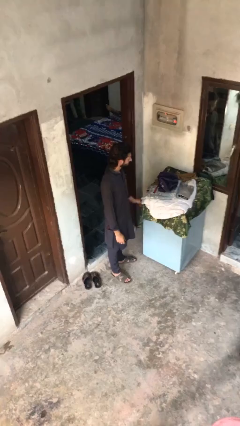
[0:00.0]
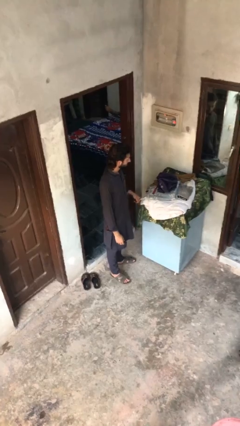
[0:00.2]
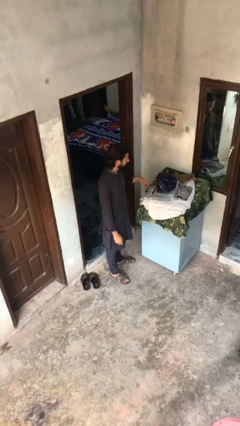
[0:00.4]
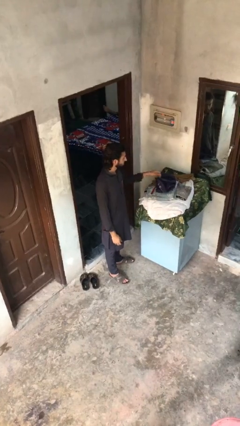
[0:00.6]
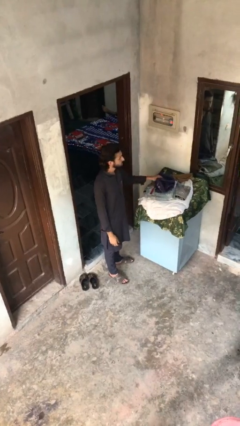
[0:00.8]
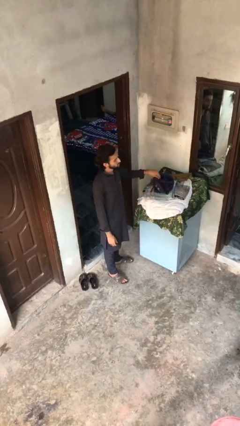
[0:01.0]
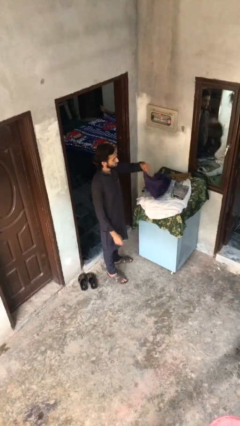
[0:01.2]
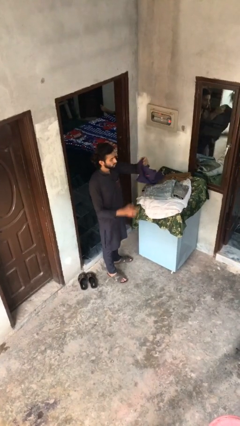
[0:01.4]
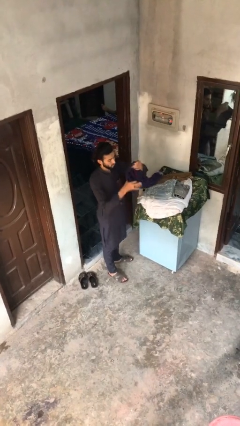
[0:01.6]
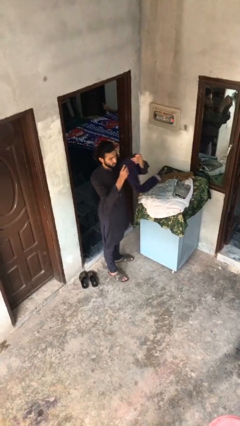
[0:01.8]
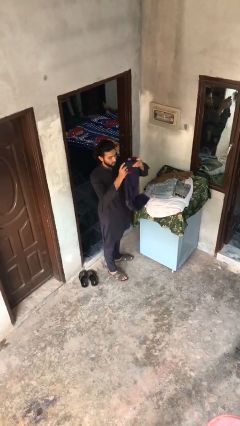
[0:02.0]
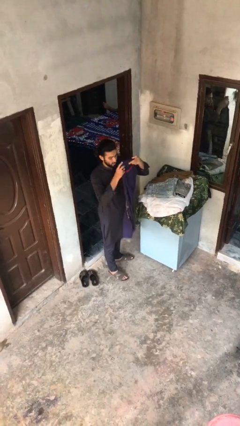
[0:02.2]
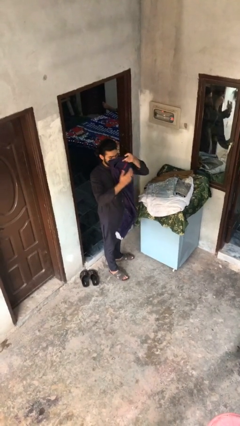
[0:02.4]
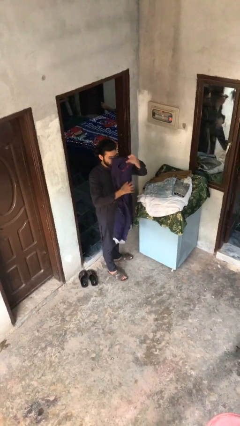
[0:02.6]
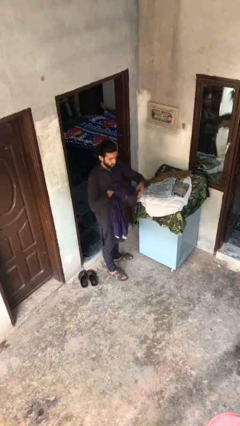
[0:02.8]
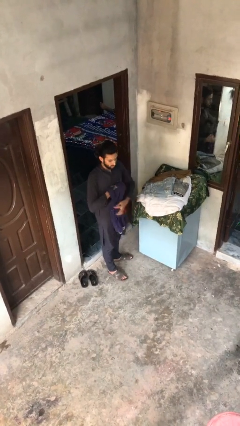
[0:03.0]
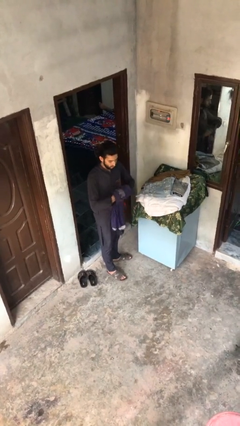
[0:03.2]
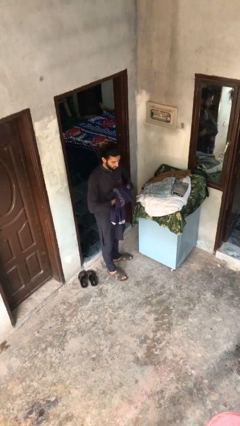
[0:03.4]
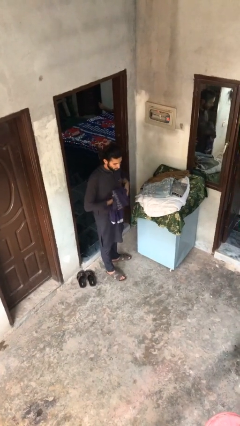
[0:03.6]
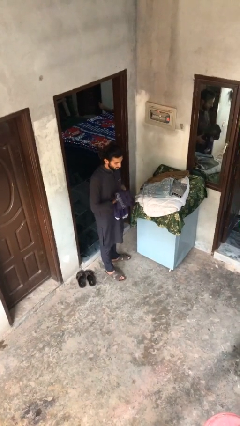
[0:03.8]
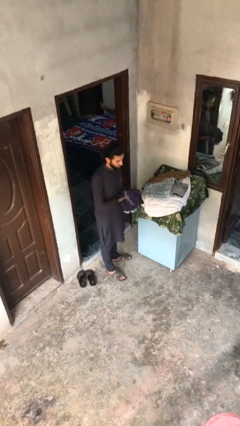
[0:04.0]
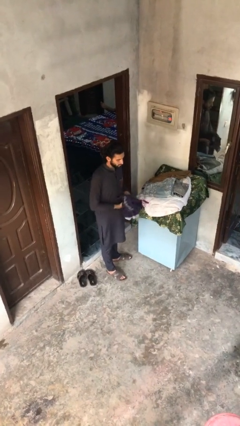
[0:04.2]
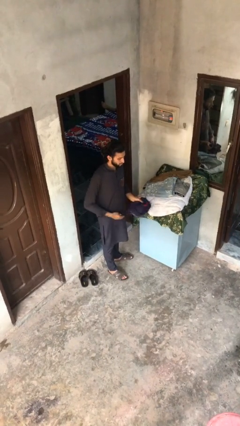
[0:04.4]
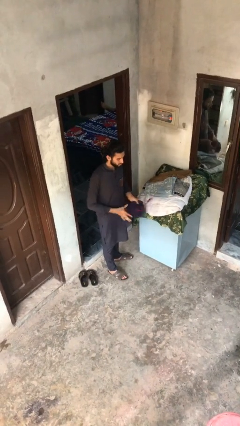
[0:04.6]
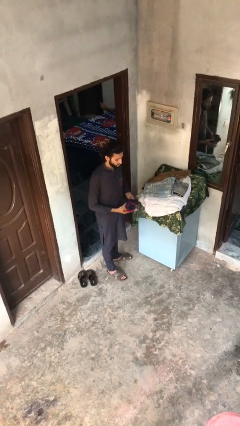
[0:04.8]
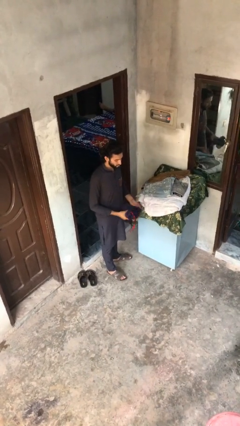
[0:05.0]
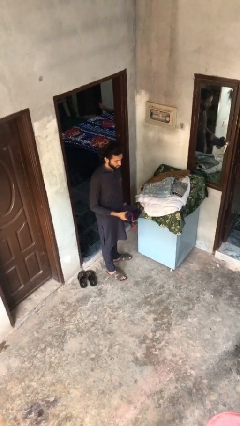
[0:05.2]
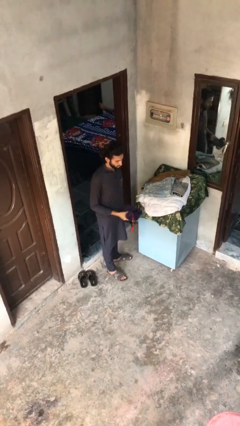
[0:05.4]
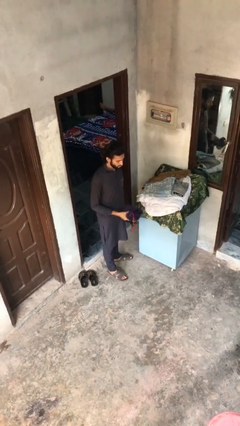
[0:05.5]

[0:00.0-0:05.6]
person folds pants

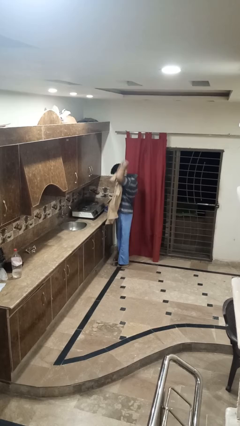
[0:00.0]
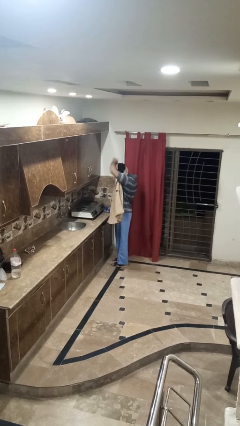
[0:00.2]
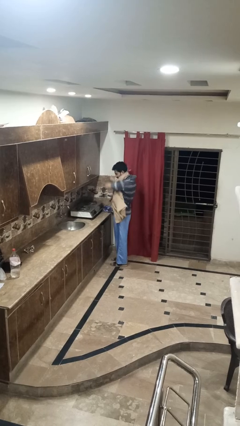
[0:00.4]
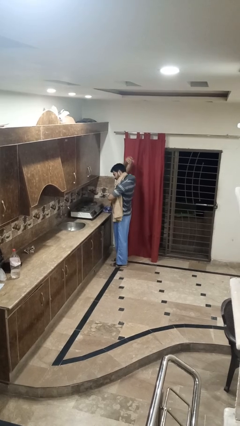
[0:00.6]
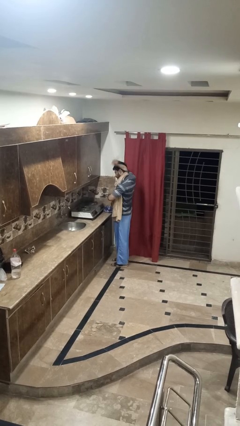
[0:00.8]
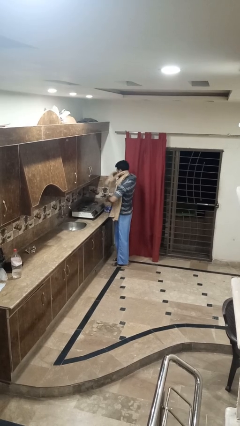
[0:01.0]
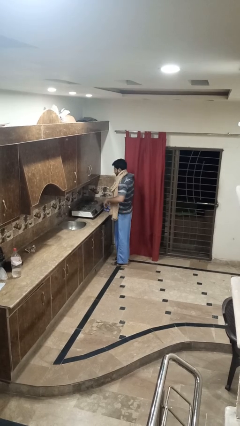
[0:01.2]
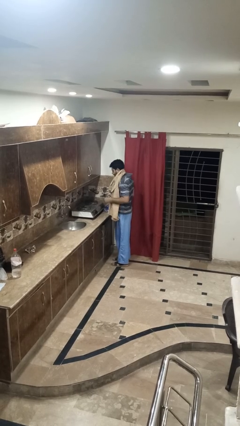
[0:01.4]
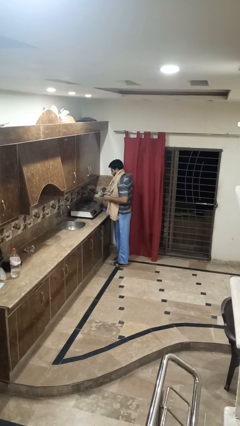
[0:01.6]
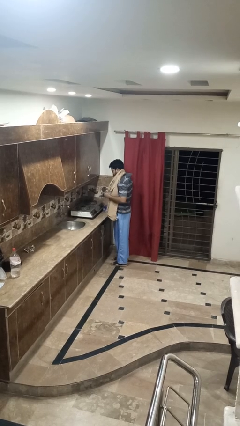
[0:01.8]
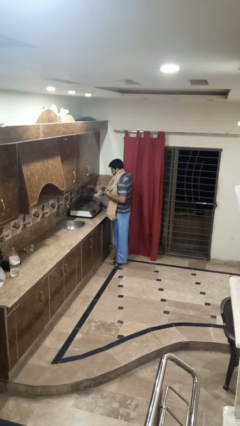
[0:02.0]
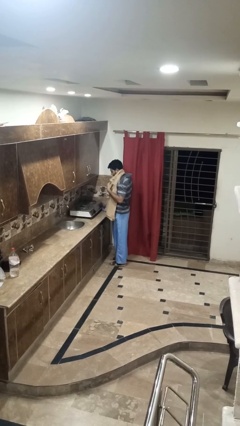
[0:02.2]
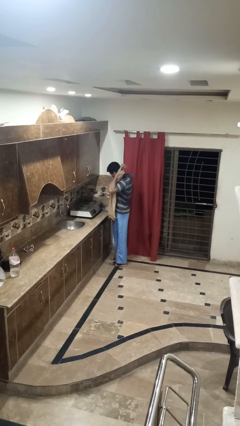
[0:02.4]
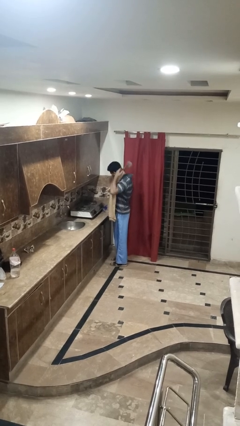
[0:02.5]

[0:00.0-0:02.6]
person puts on apron

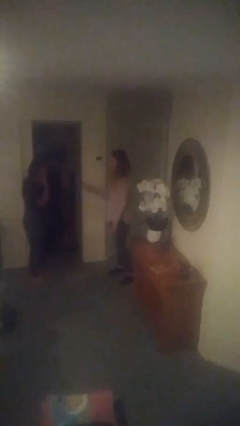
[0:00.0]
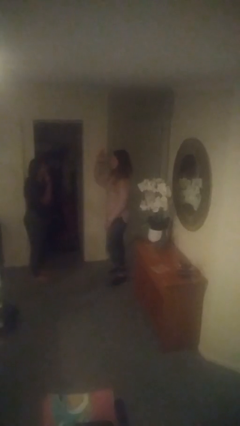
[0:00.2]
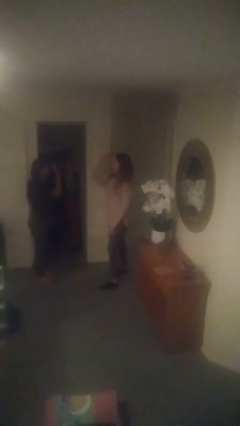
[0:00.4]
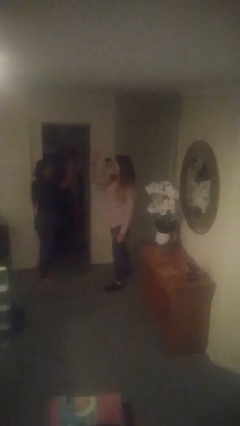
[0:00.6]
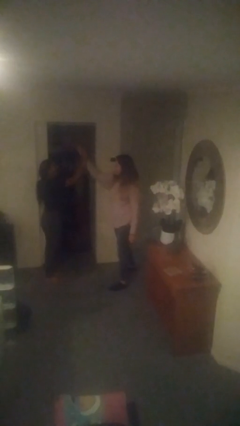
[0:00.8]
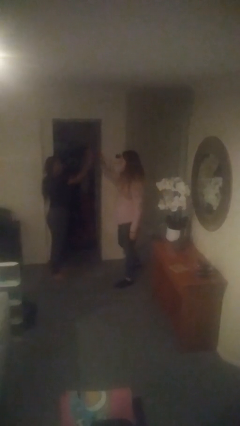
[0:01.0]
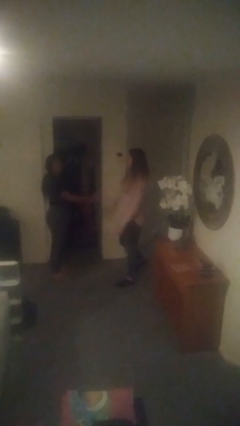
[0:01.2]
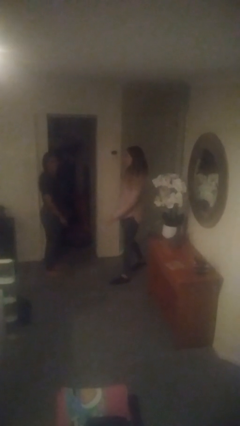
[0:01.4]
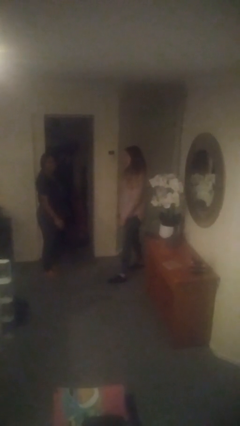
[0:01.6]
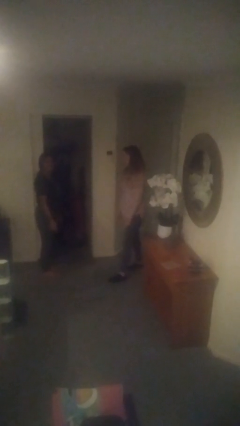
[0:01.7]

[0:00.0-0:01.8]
person highfives hand

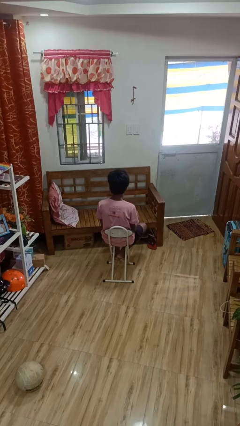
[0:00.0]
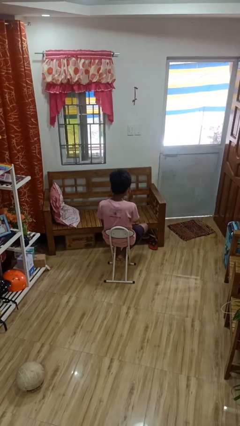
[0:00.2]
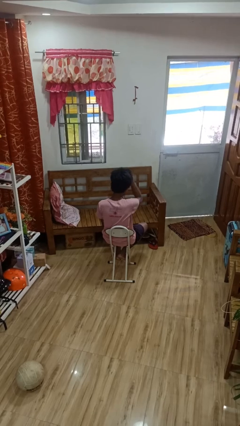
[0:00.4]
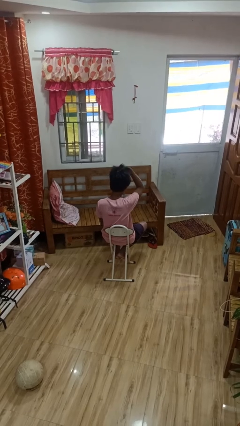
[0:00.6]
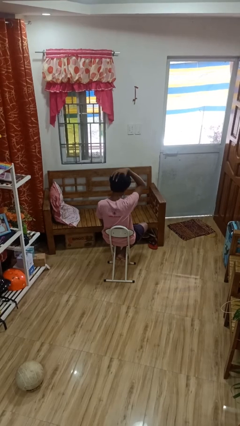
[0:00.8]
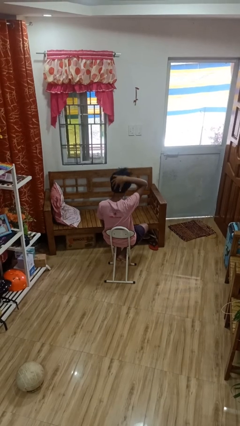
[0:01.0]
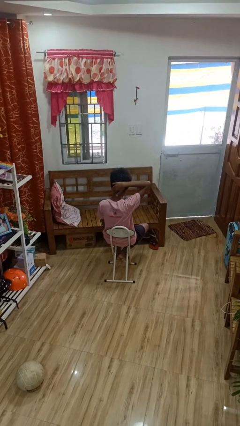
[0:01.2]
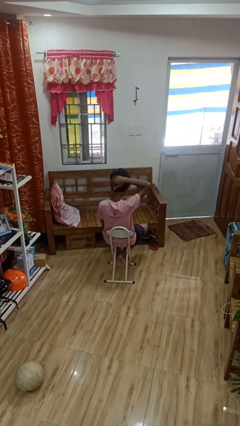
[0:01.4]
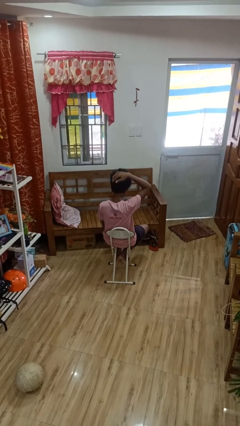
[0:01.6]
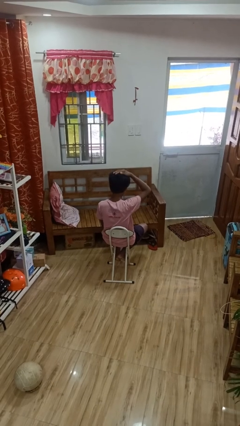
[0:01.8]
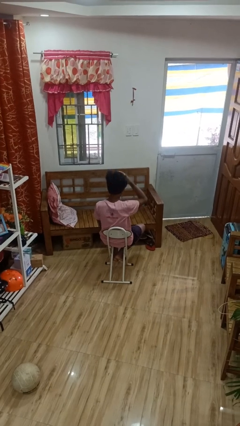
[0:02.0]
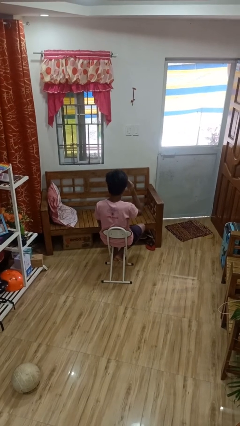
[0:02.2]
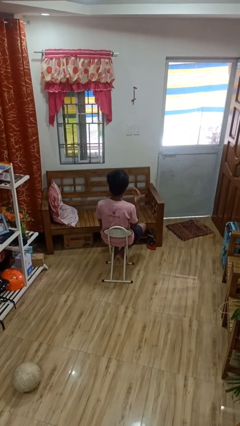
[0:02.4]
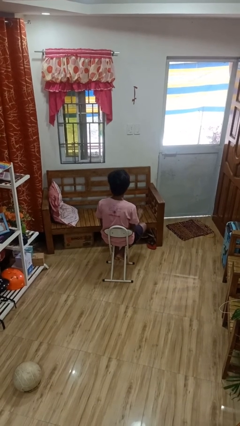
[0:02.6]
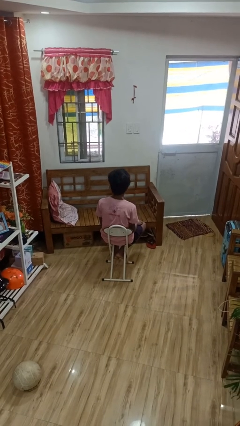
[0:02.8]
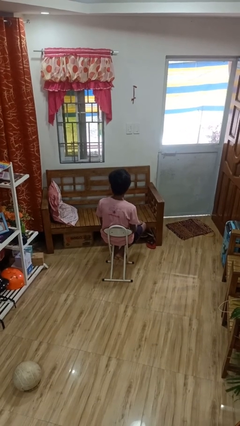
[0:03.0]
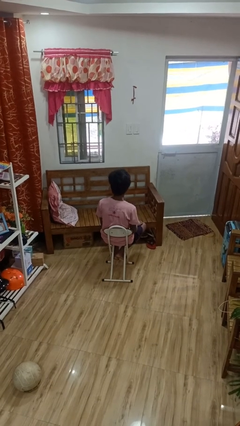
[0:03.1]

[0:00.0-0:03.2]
person strokes hair

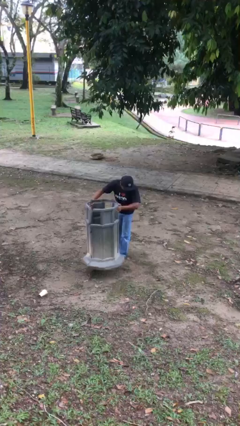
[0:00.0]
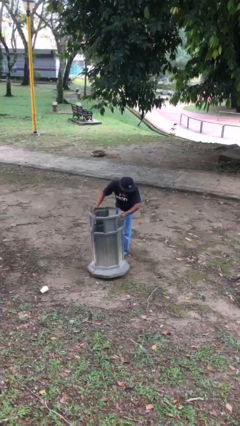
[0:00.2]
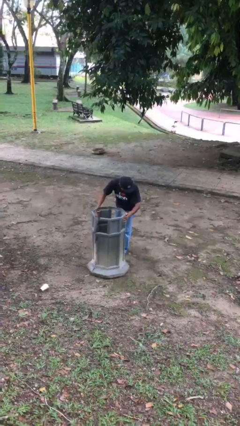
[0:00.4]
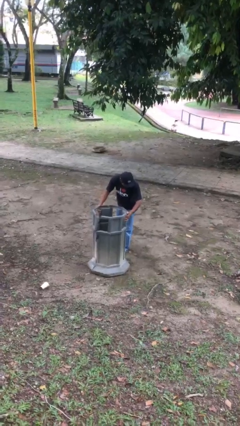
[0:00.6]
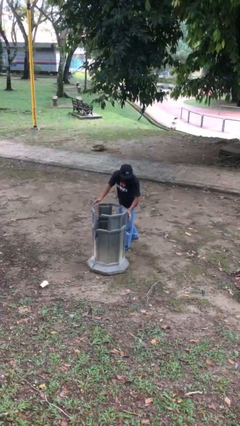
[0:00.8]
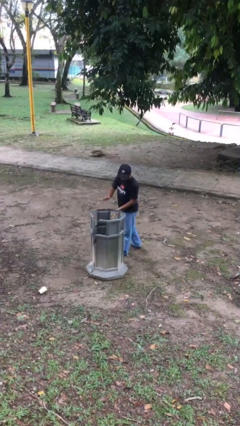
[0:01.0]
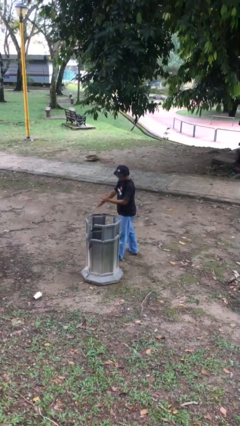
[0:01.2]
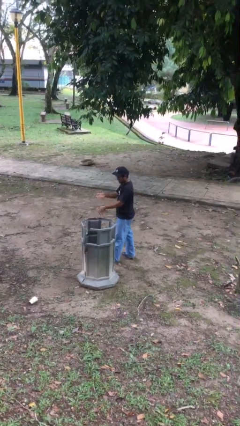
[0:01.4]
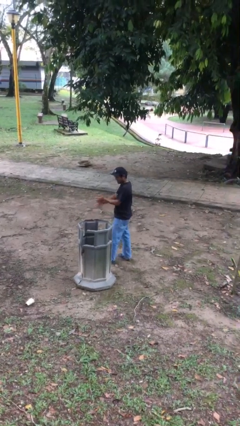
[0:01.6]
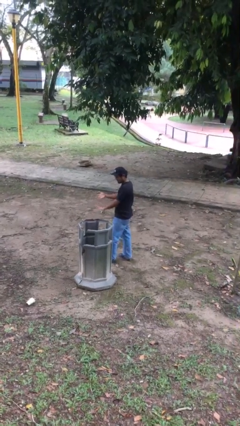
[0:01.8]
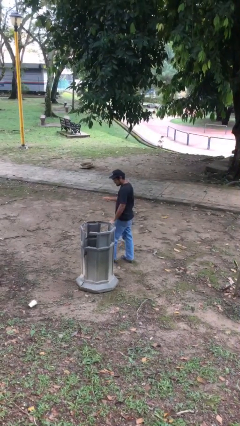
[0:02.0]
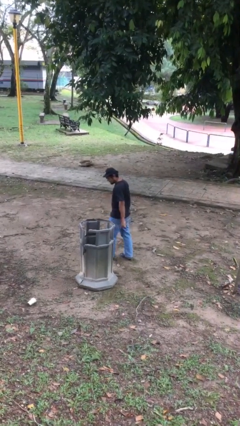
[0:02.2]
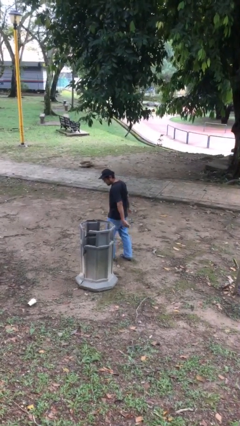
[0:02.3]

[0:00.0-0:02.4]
person puts down object on floor

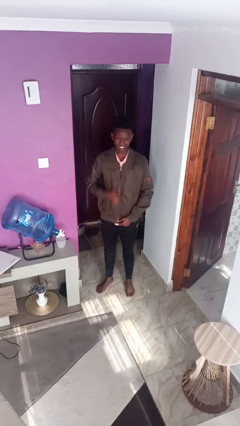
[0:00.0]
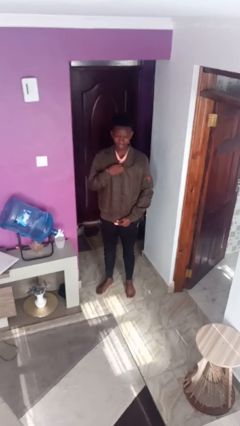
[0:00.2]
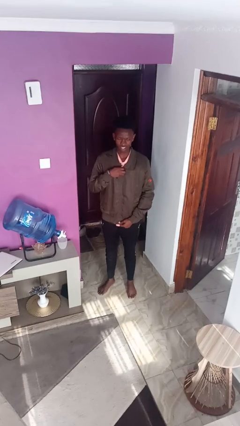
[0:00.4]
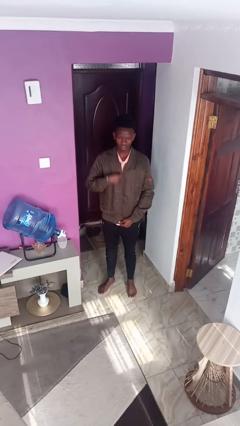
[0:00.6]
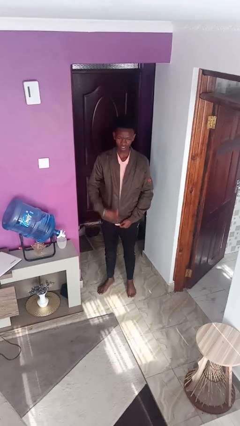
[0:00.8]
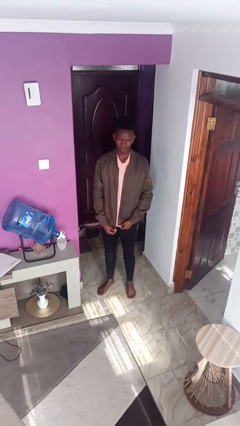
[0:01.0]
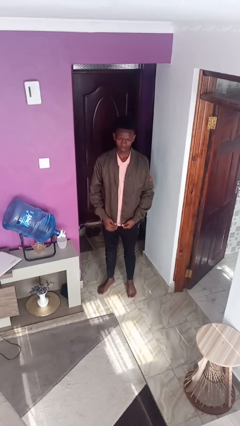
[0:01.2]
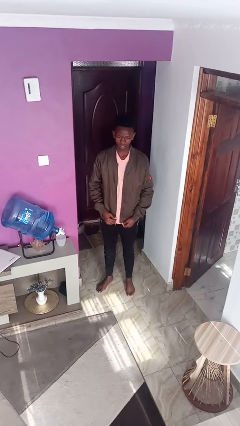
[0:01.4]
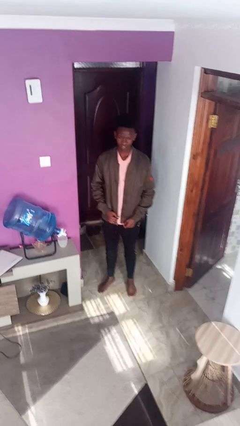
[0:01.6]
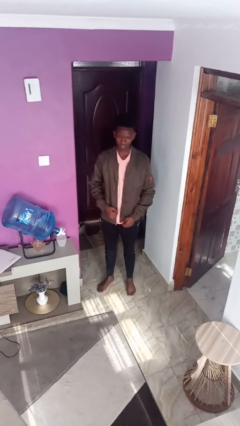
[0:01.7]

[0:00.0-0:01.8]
person unzips jacket

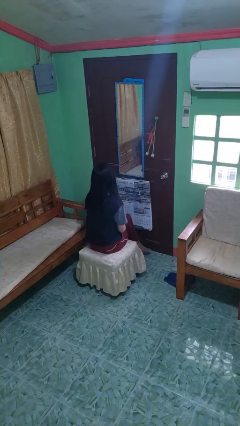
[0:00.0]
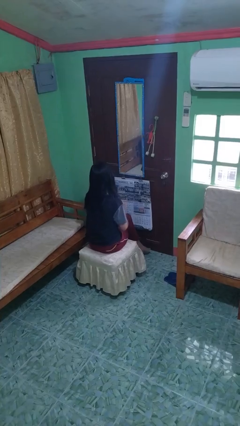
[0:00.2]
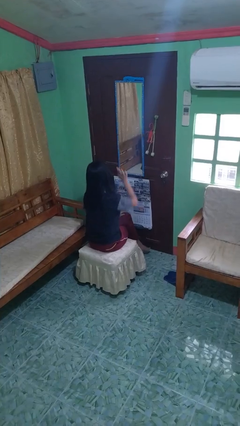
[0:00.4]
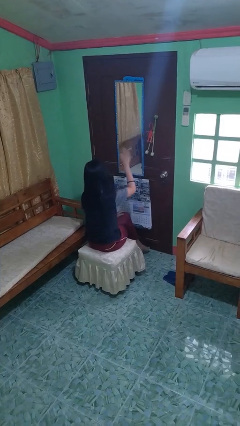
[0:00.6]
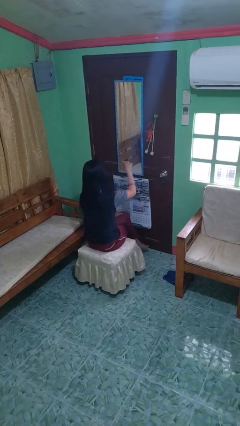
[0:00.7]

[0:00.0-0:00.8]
person gestures come here
